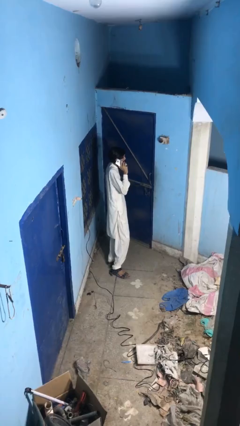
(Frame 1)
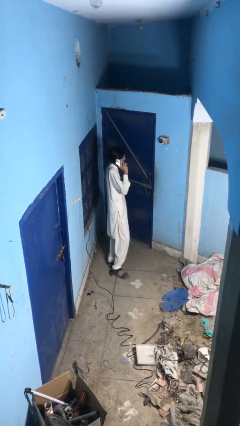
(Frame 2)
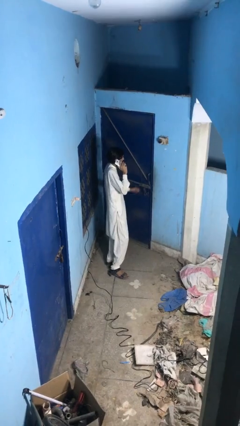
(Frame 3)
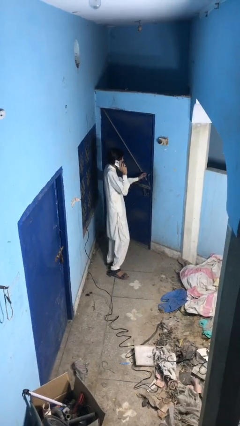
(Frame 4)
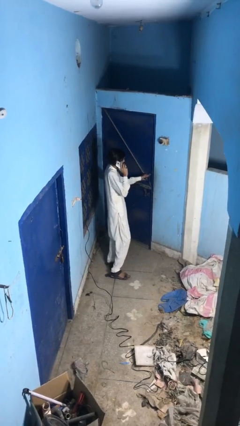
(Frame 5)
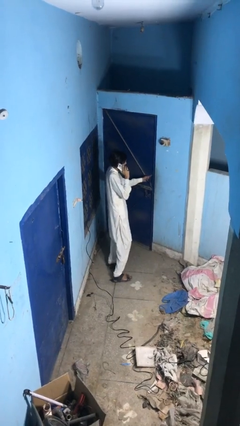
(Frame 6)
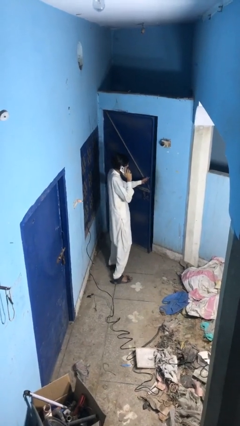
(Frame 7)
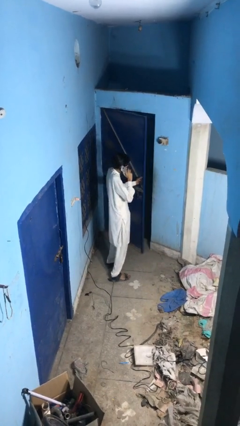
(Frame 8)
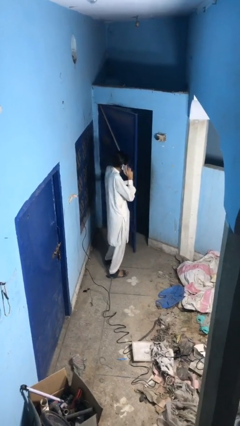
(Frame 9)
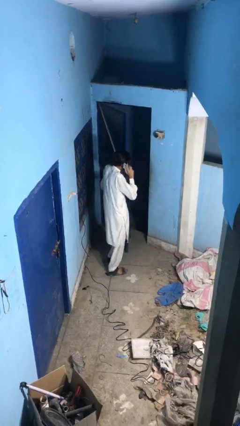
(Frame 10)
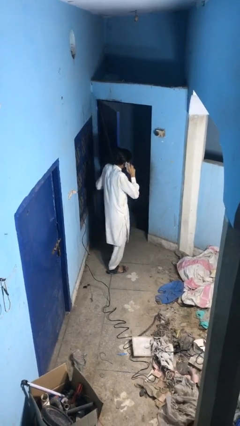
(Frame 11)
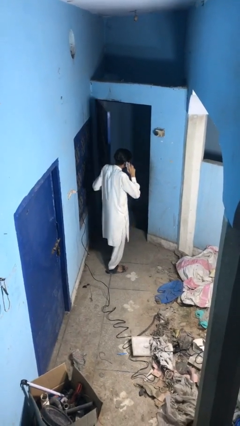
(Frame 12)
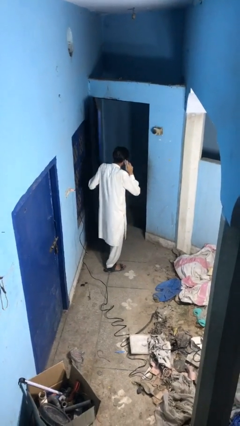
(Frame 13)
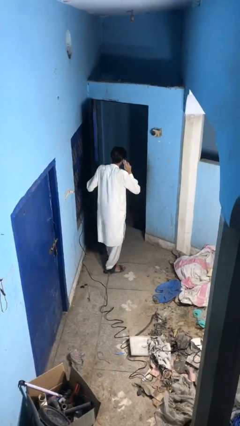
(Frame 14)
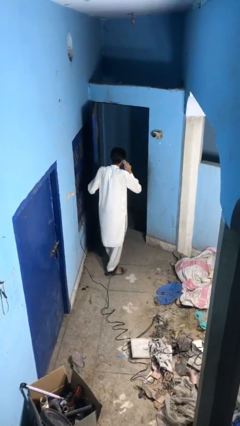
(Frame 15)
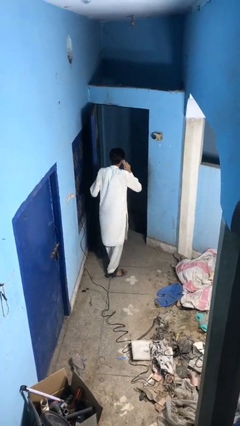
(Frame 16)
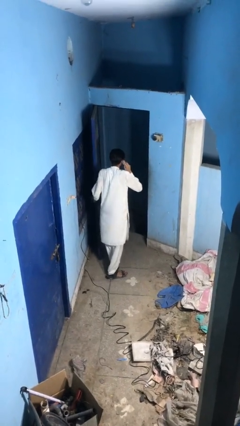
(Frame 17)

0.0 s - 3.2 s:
person opens facility door

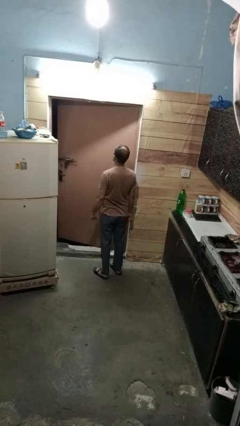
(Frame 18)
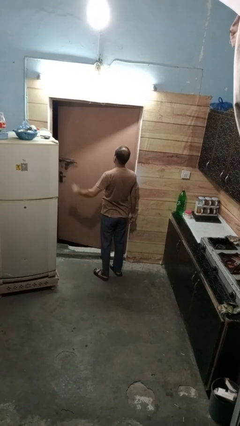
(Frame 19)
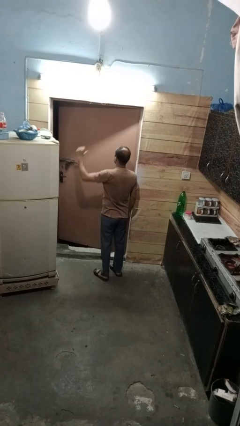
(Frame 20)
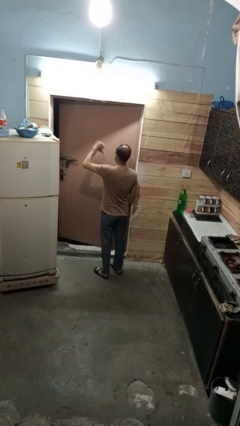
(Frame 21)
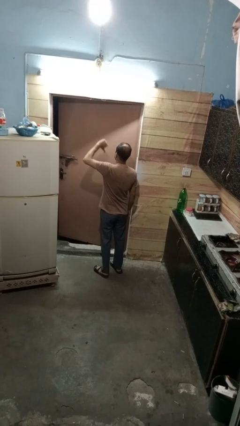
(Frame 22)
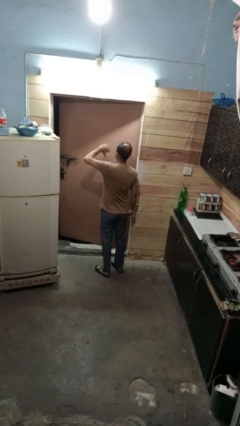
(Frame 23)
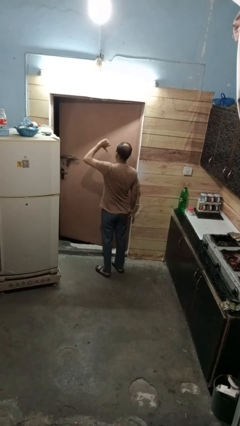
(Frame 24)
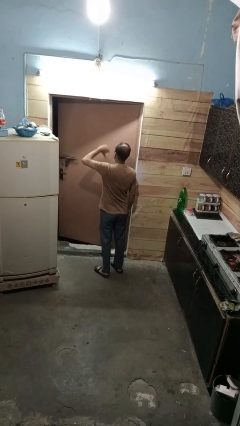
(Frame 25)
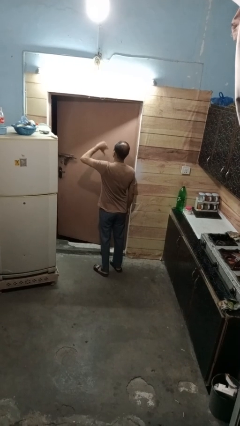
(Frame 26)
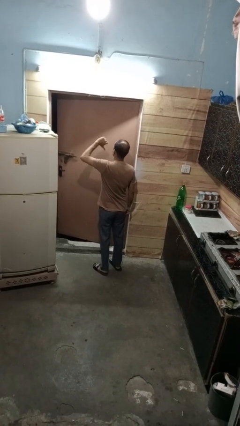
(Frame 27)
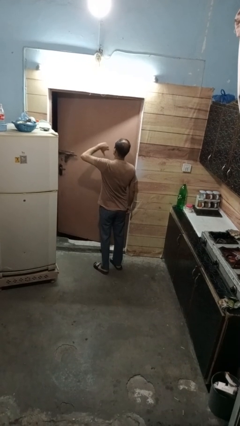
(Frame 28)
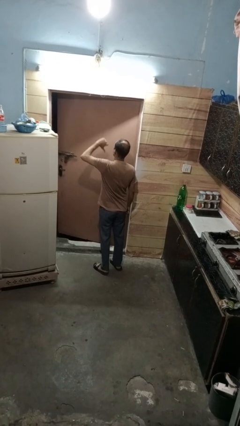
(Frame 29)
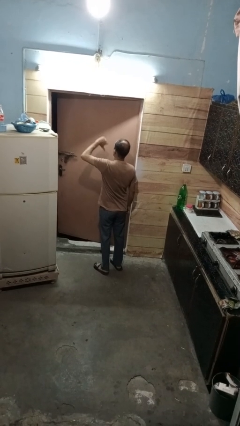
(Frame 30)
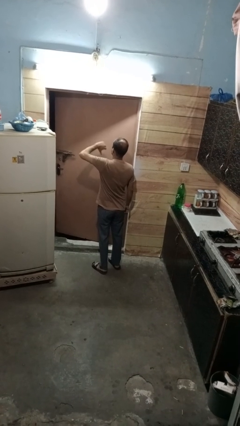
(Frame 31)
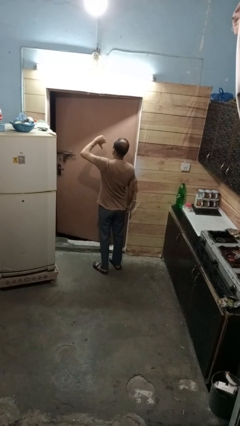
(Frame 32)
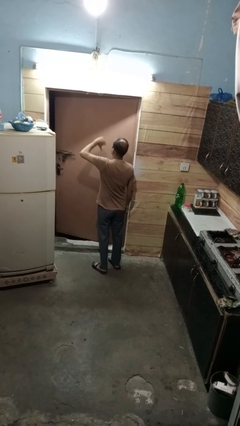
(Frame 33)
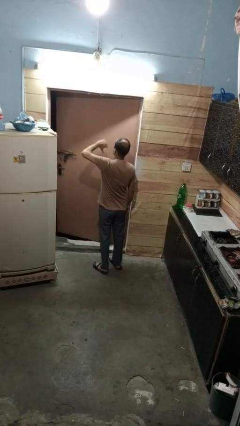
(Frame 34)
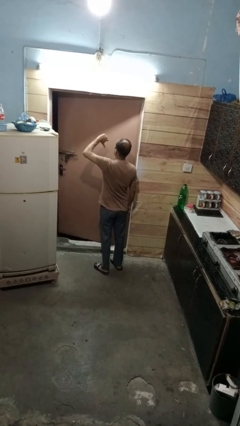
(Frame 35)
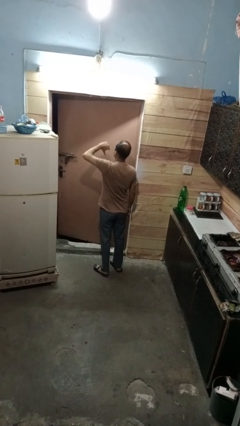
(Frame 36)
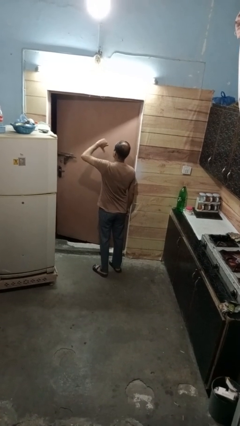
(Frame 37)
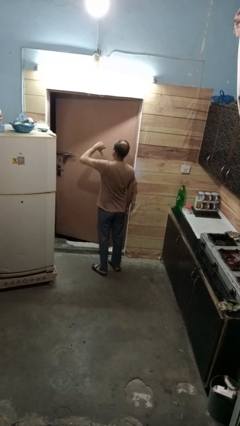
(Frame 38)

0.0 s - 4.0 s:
person gestures hang loose

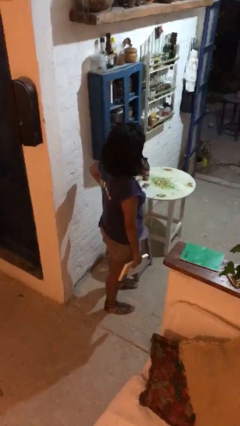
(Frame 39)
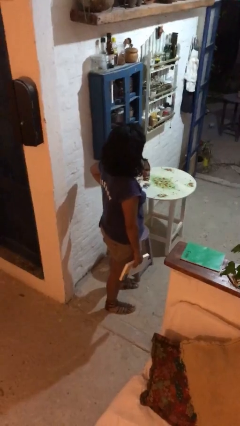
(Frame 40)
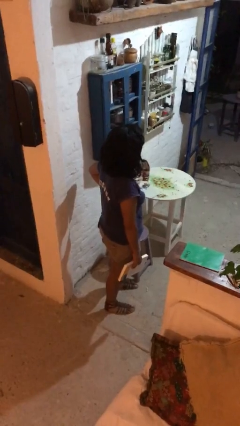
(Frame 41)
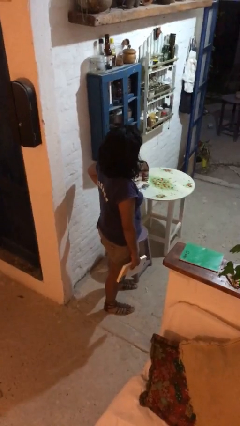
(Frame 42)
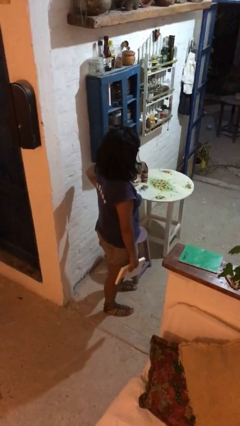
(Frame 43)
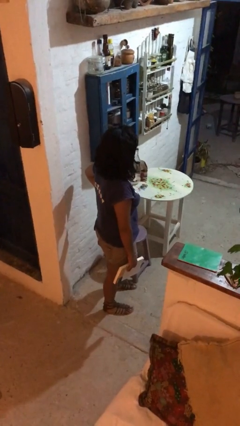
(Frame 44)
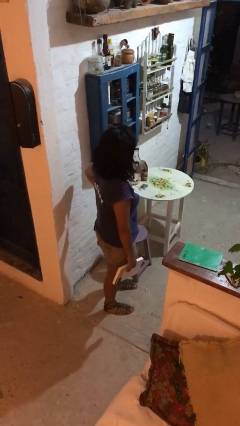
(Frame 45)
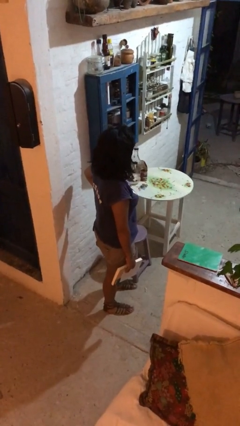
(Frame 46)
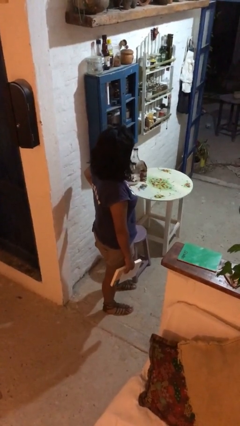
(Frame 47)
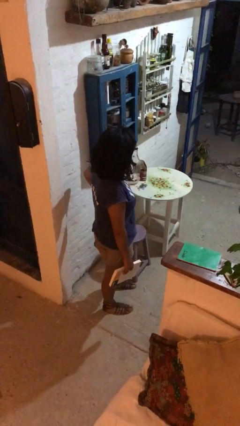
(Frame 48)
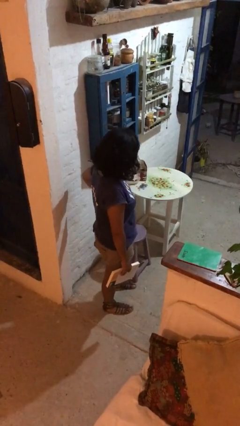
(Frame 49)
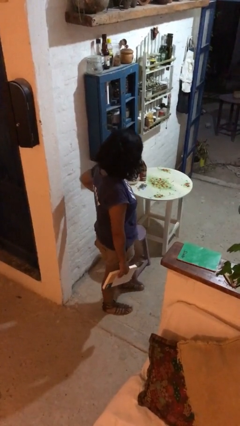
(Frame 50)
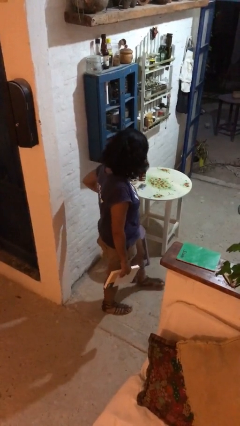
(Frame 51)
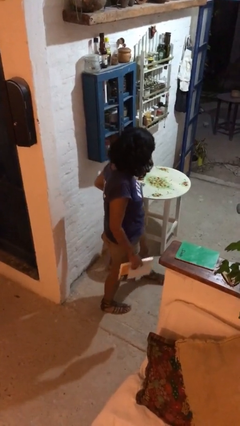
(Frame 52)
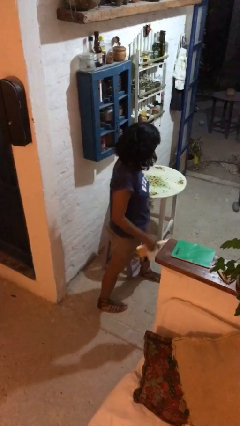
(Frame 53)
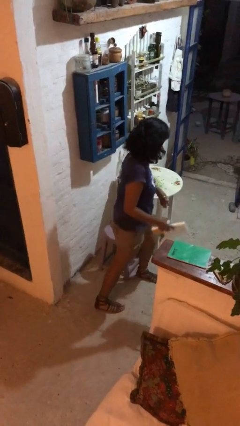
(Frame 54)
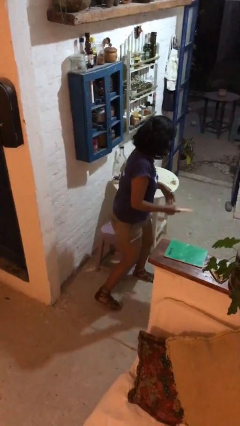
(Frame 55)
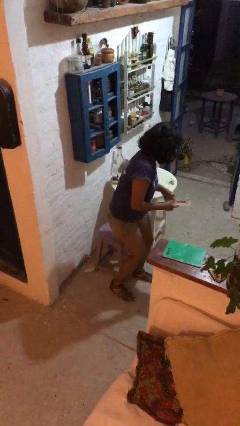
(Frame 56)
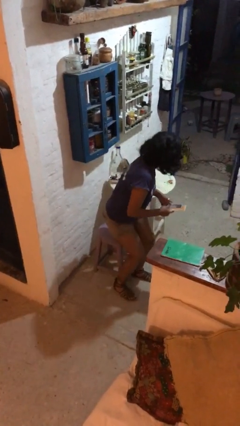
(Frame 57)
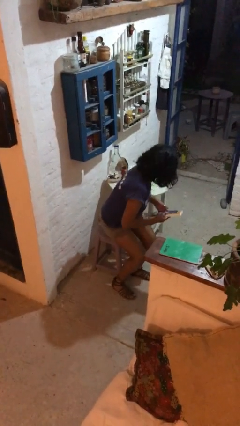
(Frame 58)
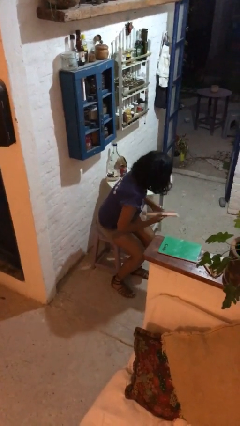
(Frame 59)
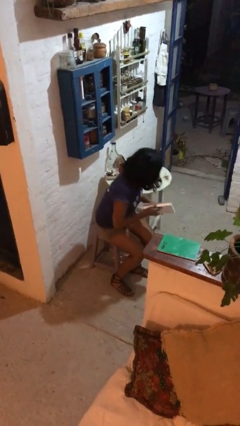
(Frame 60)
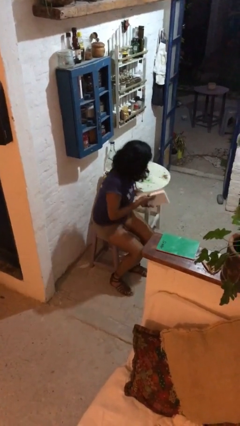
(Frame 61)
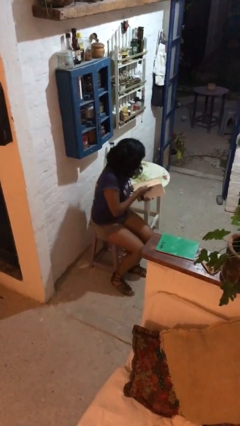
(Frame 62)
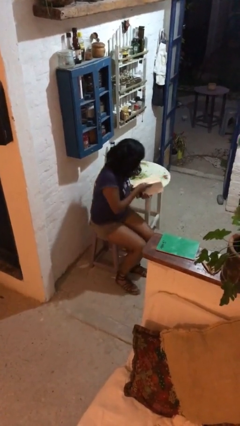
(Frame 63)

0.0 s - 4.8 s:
person sits down

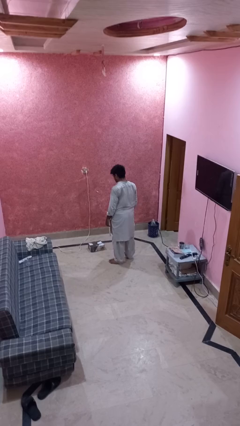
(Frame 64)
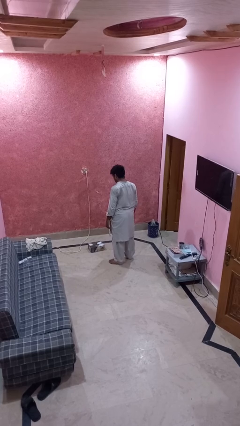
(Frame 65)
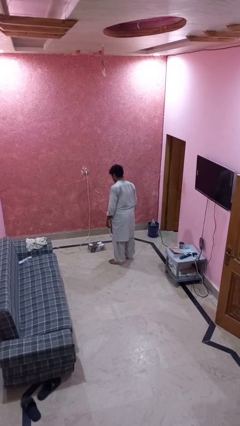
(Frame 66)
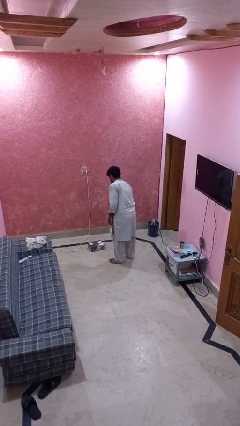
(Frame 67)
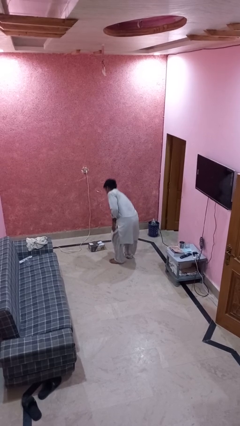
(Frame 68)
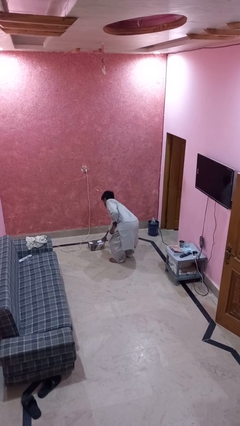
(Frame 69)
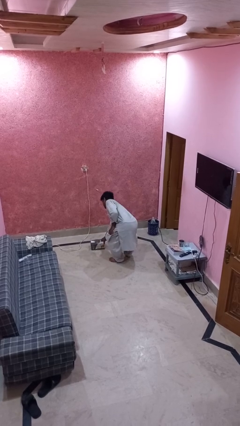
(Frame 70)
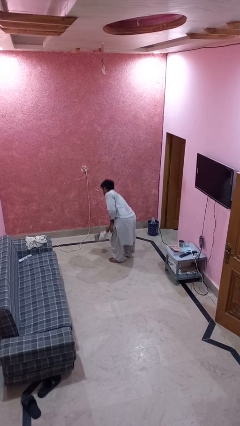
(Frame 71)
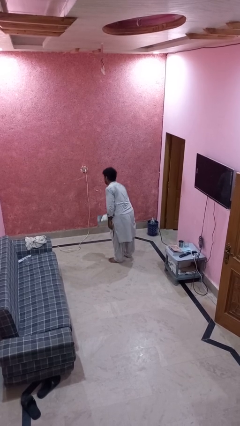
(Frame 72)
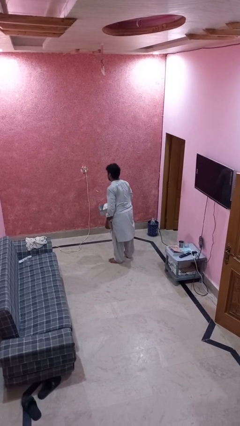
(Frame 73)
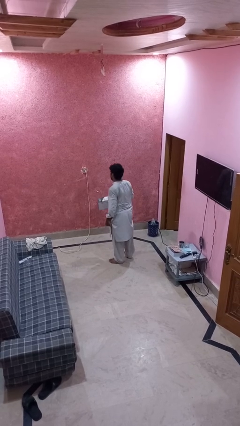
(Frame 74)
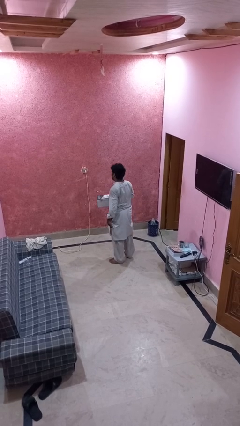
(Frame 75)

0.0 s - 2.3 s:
person picks up object from floor

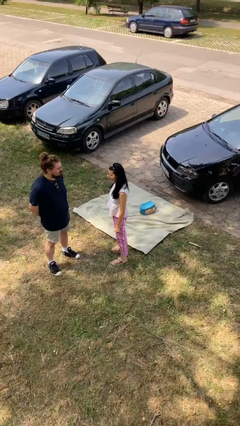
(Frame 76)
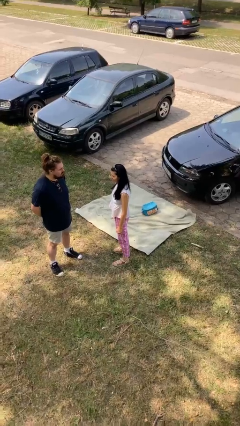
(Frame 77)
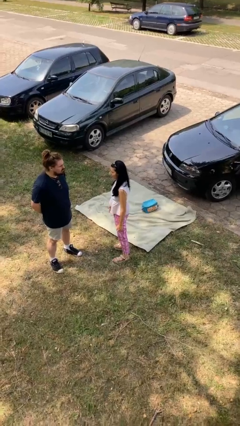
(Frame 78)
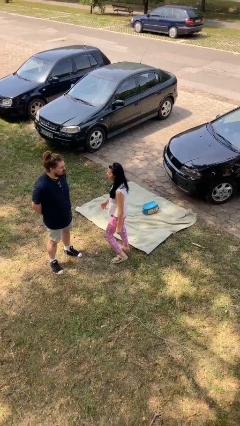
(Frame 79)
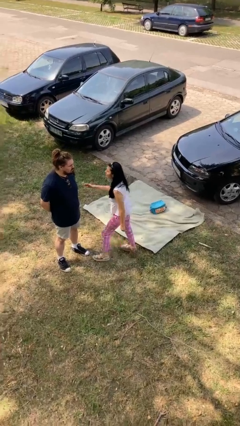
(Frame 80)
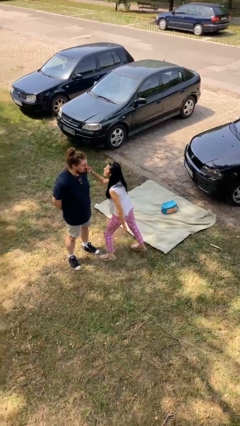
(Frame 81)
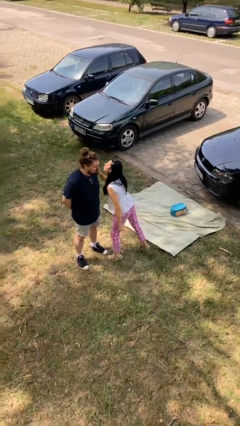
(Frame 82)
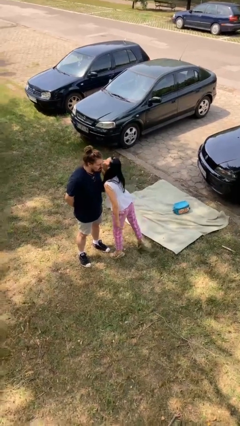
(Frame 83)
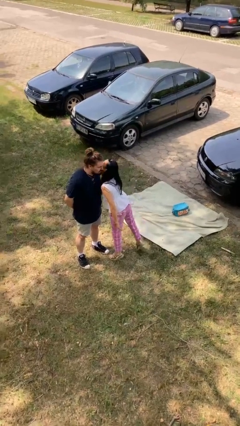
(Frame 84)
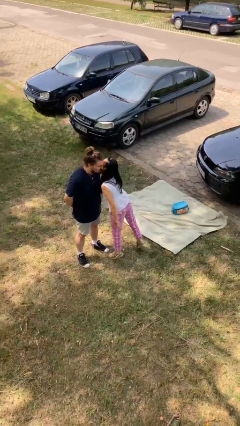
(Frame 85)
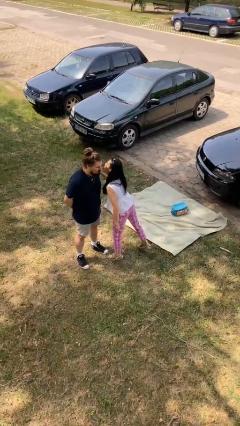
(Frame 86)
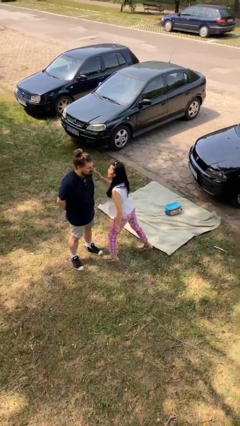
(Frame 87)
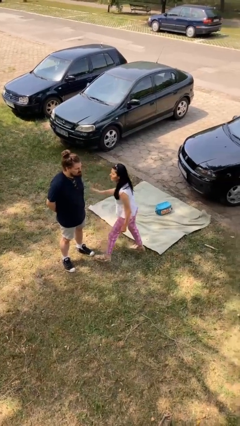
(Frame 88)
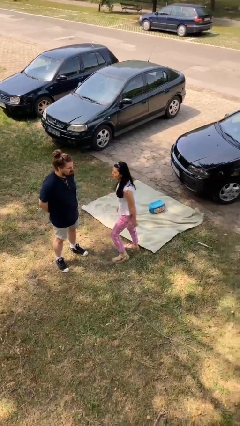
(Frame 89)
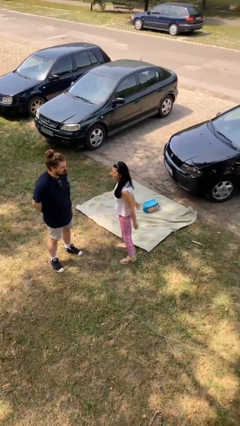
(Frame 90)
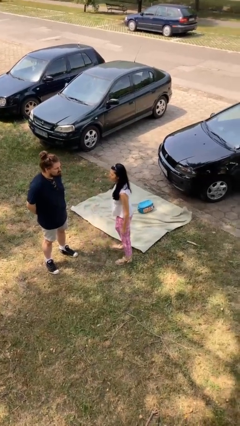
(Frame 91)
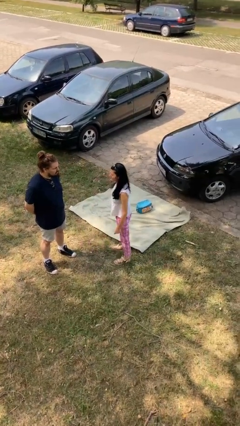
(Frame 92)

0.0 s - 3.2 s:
person kisses cheek of person
